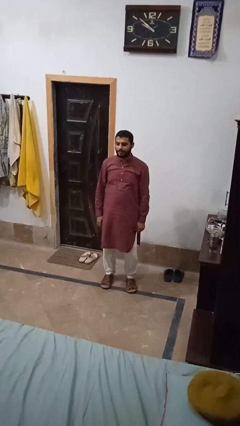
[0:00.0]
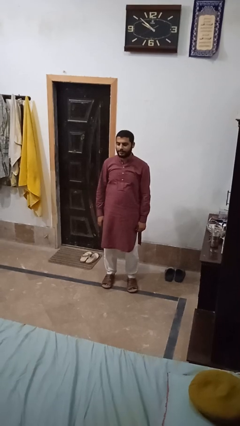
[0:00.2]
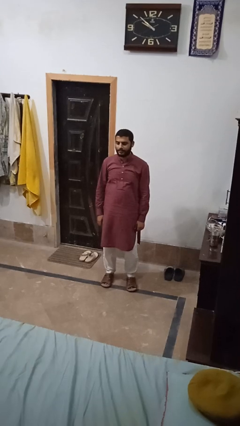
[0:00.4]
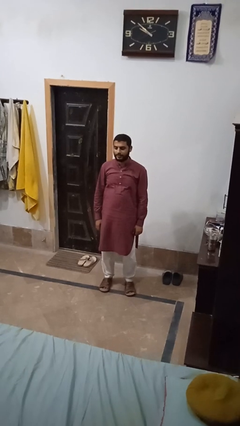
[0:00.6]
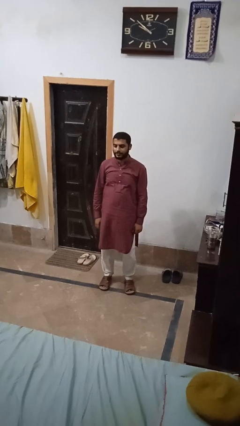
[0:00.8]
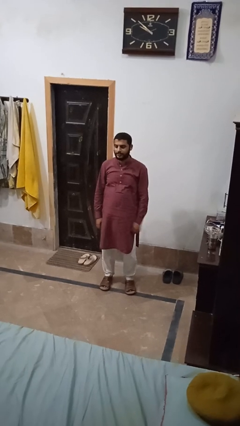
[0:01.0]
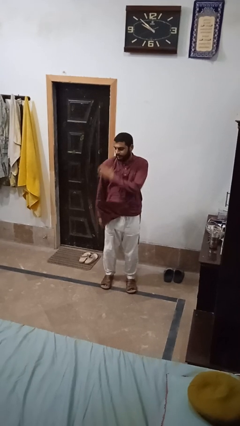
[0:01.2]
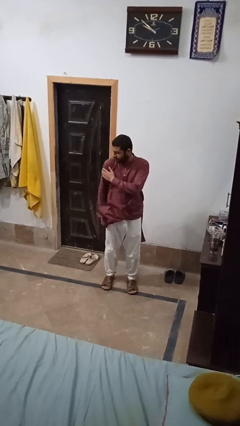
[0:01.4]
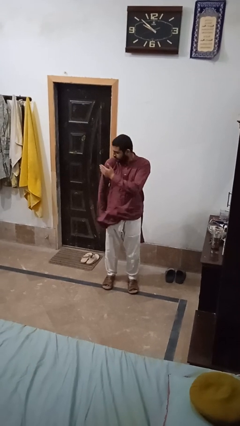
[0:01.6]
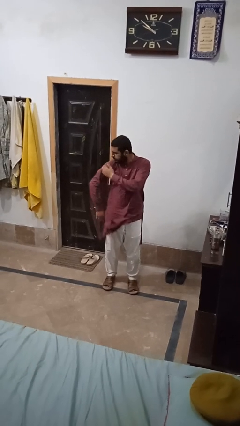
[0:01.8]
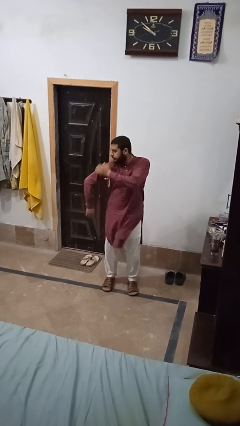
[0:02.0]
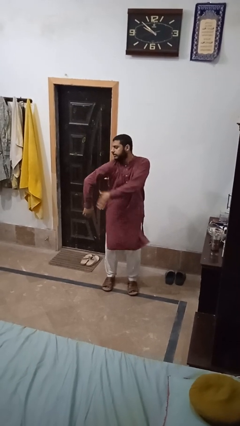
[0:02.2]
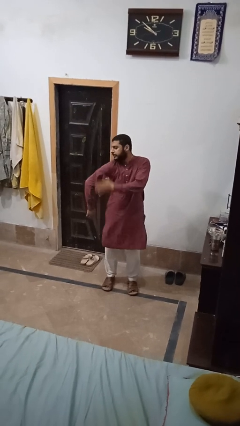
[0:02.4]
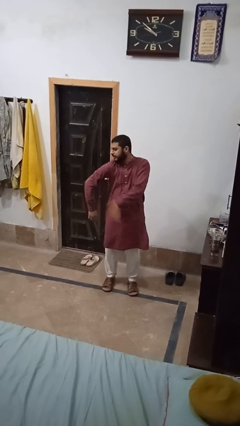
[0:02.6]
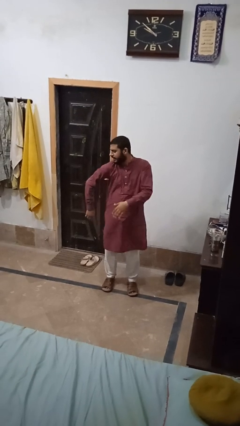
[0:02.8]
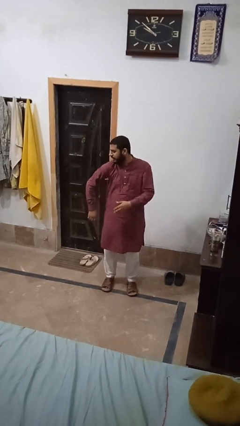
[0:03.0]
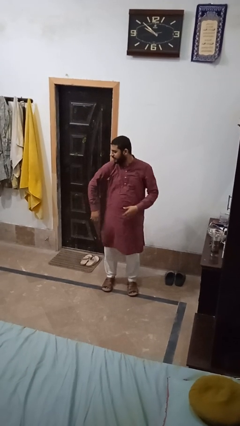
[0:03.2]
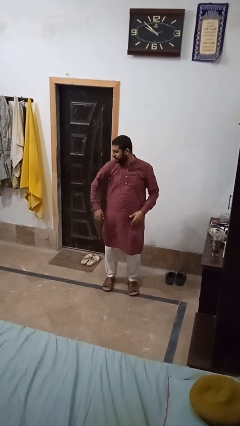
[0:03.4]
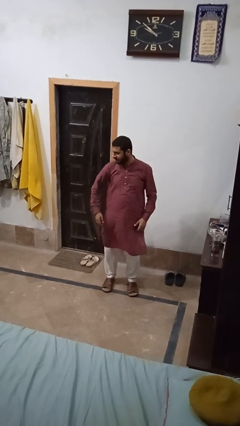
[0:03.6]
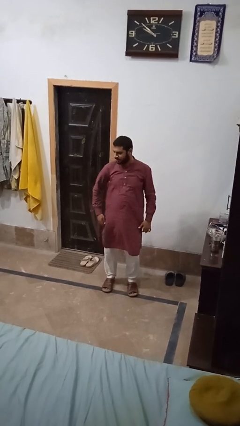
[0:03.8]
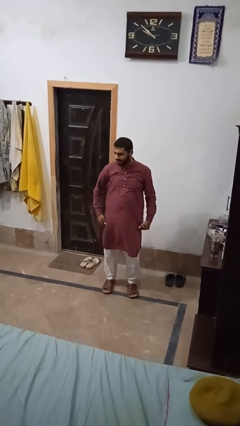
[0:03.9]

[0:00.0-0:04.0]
person swats bug

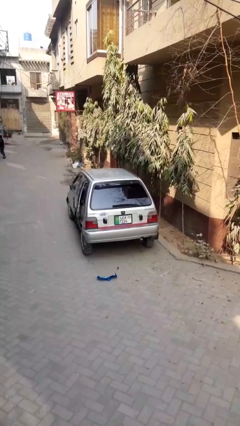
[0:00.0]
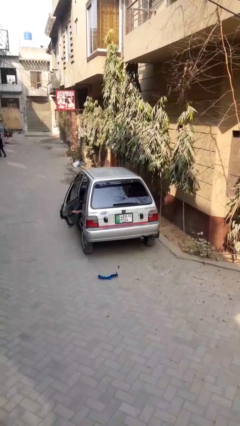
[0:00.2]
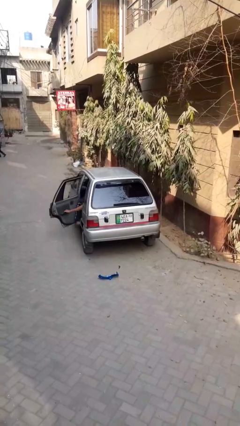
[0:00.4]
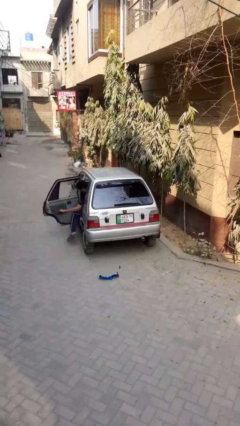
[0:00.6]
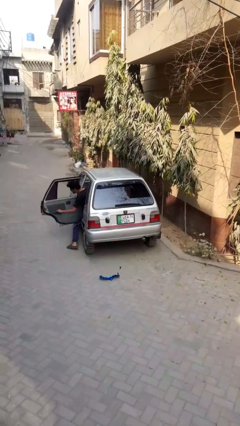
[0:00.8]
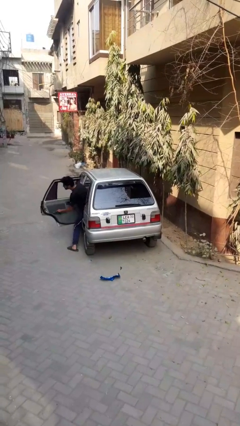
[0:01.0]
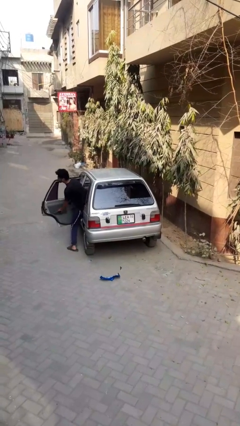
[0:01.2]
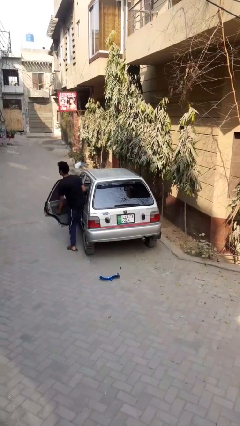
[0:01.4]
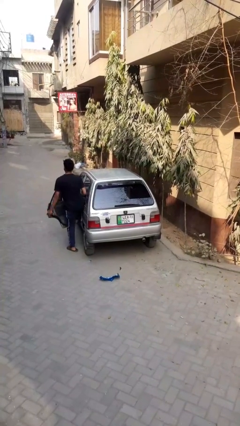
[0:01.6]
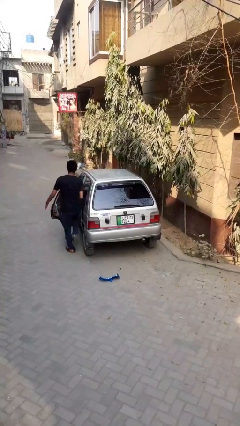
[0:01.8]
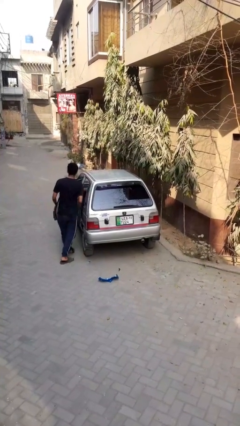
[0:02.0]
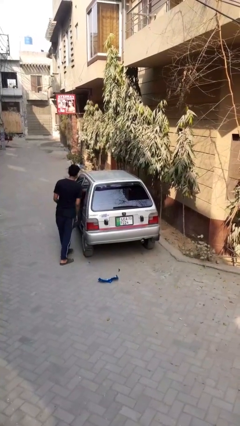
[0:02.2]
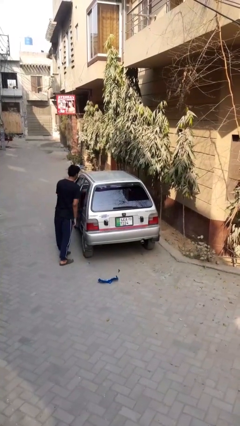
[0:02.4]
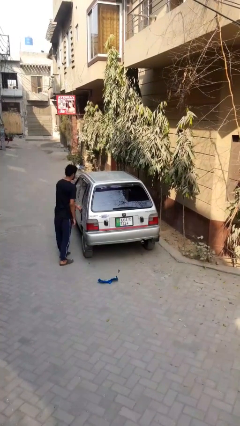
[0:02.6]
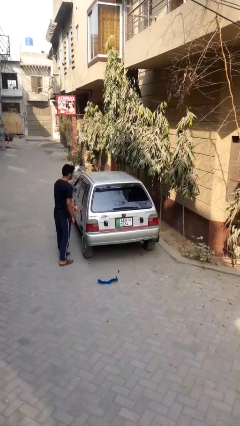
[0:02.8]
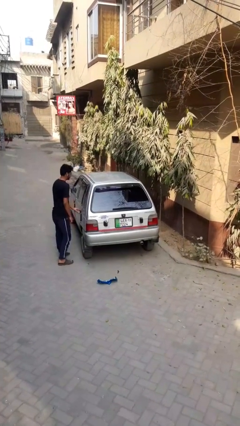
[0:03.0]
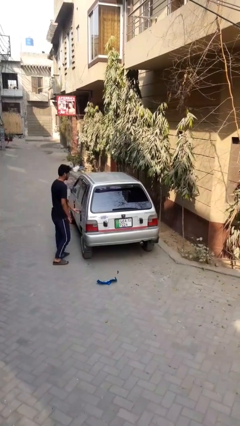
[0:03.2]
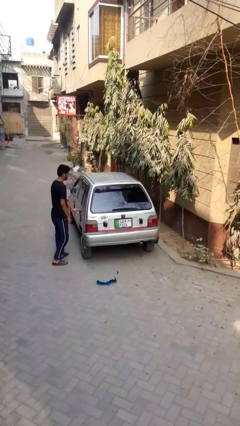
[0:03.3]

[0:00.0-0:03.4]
car drops off person

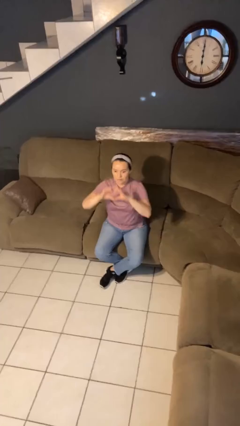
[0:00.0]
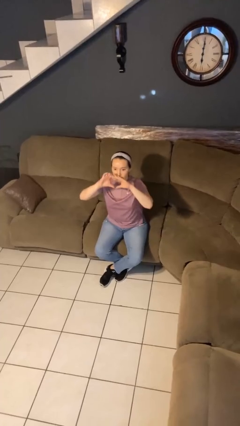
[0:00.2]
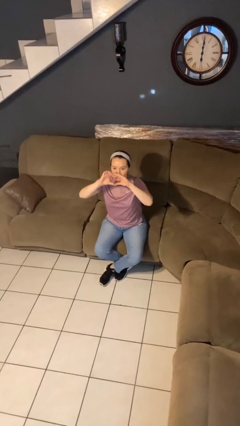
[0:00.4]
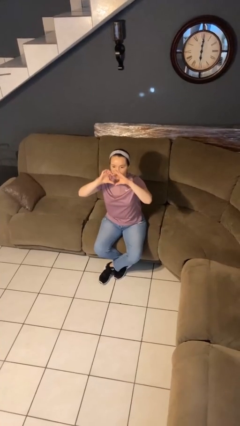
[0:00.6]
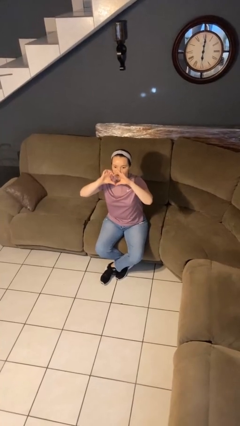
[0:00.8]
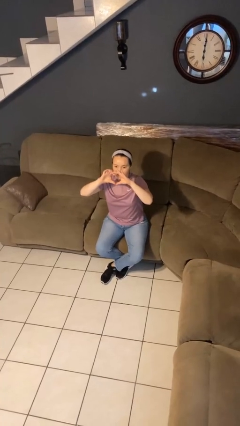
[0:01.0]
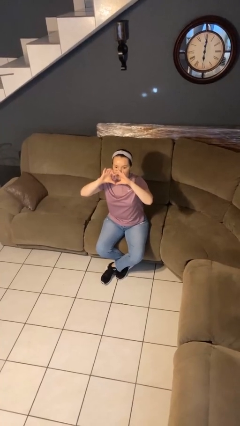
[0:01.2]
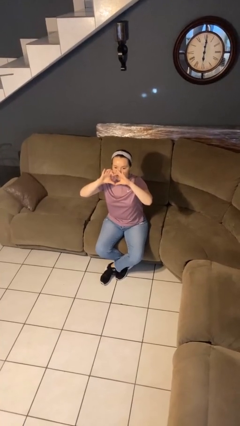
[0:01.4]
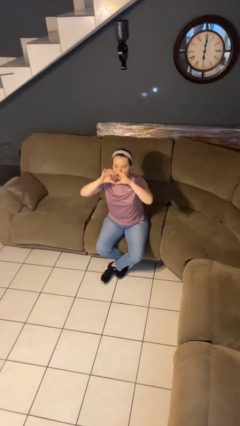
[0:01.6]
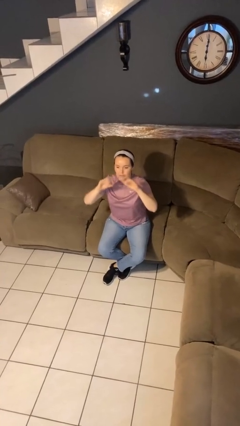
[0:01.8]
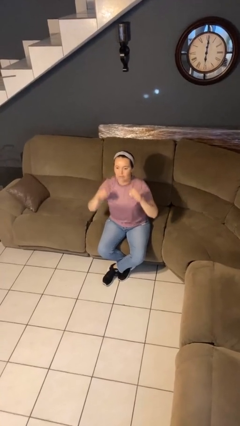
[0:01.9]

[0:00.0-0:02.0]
person gestures heart

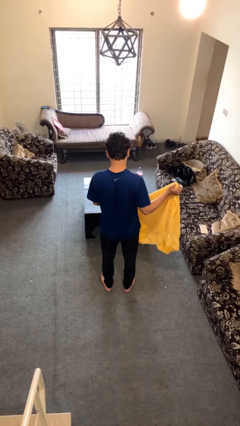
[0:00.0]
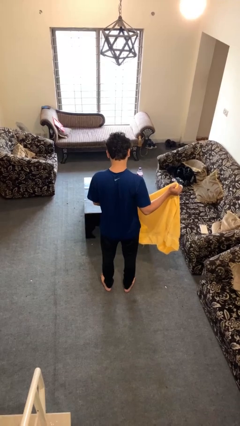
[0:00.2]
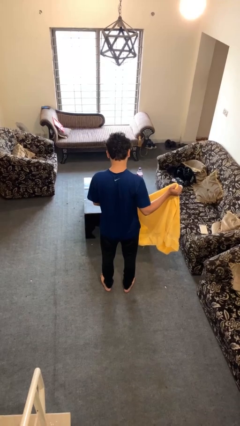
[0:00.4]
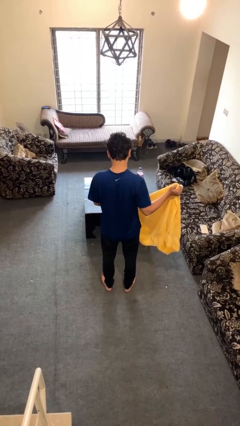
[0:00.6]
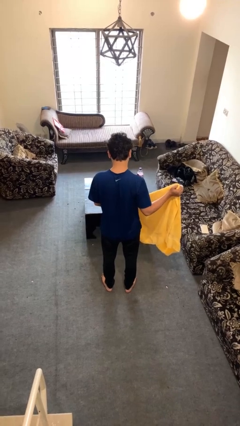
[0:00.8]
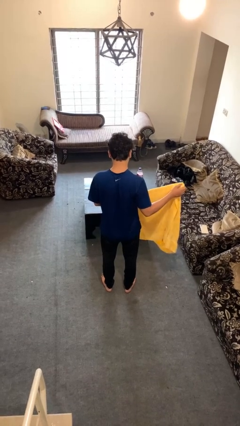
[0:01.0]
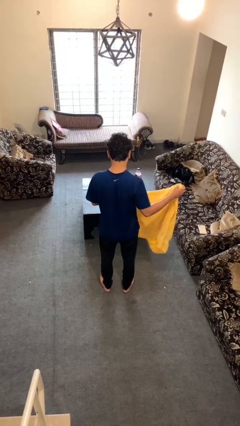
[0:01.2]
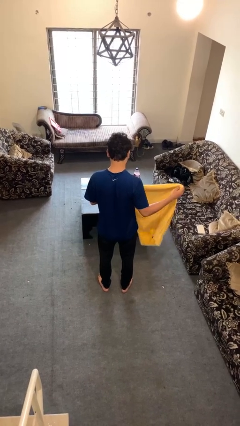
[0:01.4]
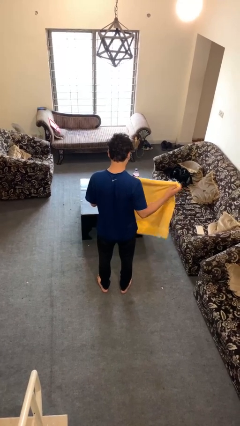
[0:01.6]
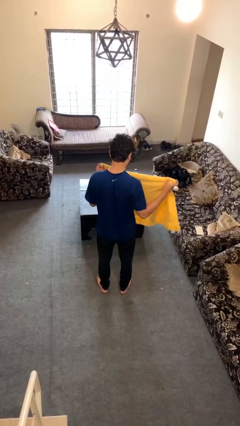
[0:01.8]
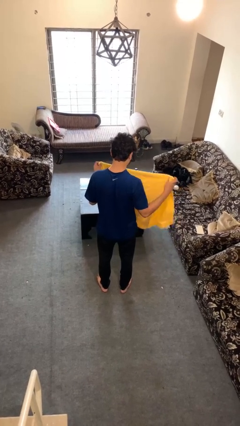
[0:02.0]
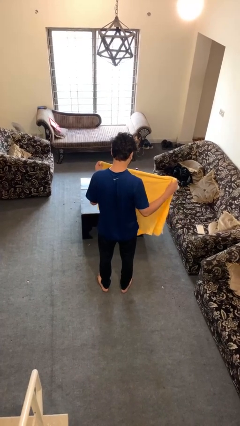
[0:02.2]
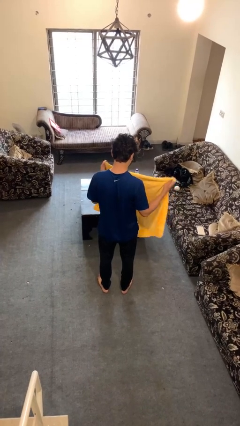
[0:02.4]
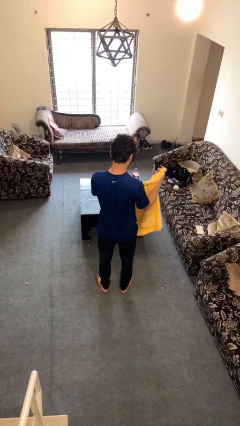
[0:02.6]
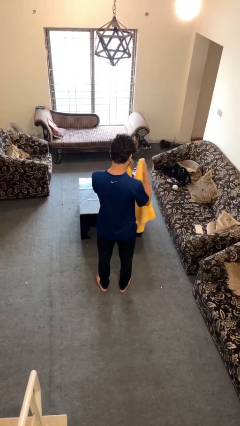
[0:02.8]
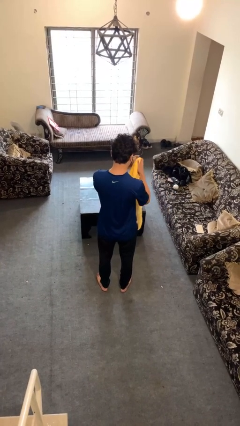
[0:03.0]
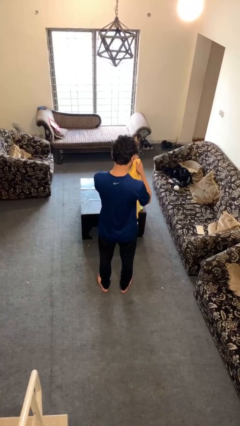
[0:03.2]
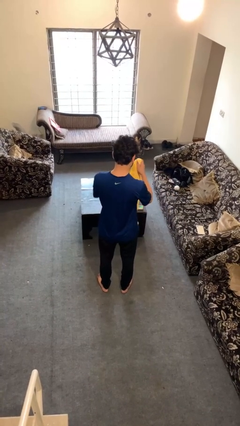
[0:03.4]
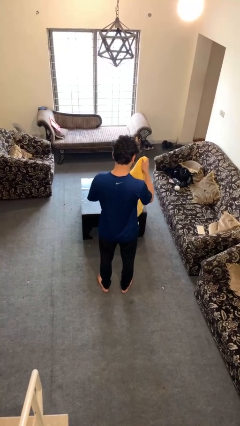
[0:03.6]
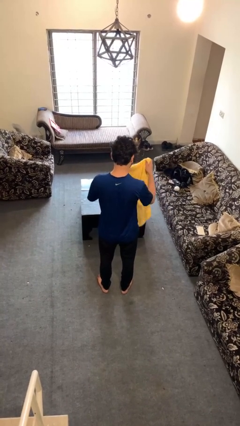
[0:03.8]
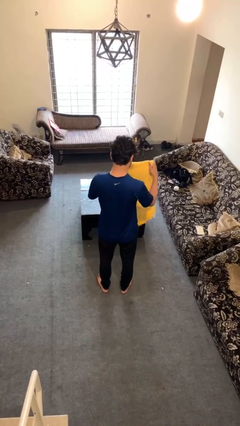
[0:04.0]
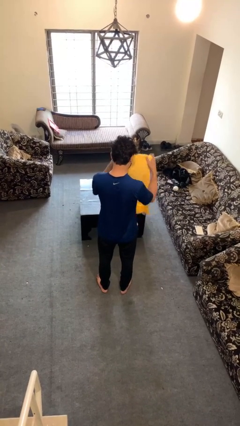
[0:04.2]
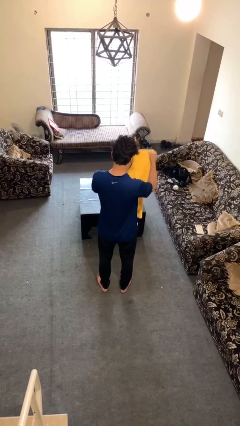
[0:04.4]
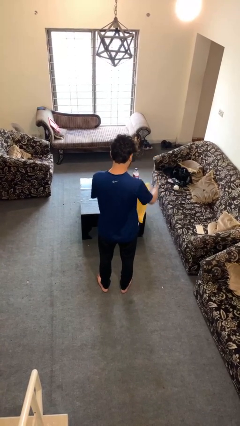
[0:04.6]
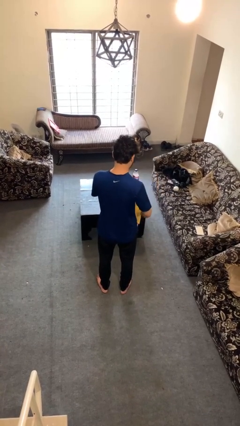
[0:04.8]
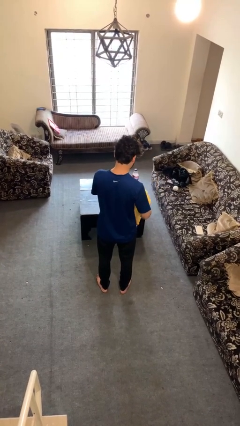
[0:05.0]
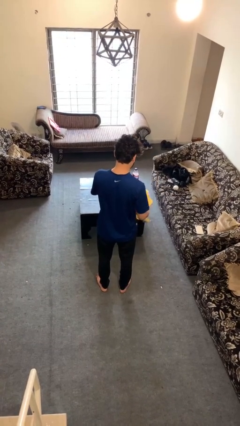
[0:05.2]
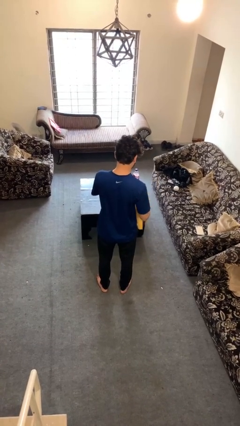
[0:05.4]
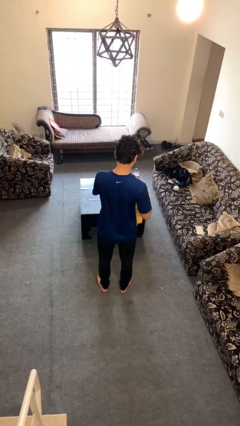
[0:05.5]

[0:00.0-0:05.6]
person folds towel

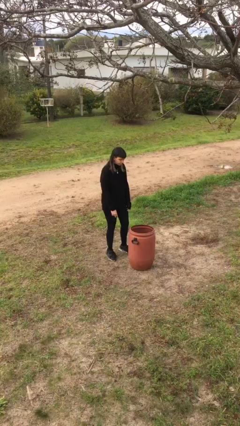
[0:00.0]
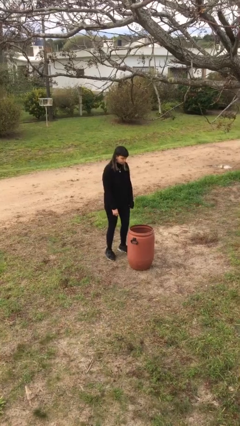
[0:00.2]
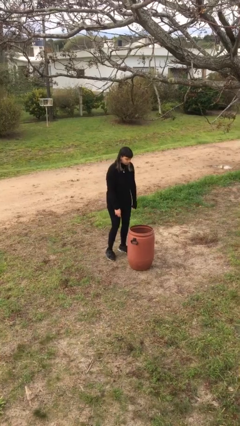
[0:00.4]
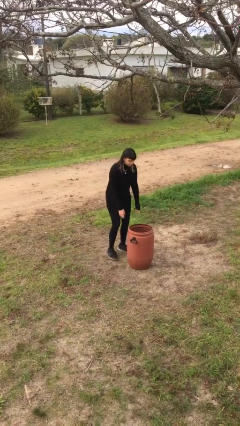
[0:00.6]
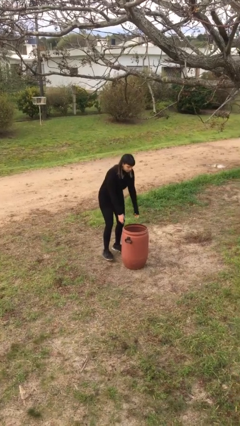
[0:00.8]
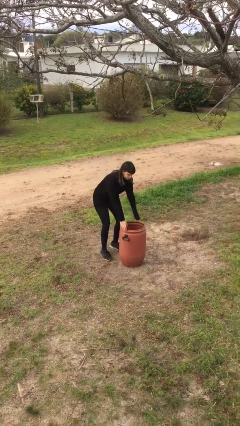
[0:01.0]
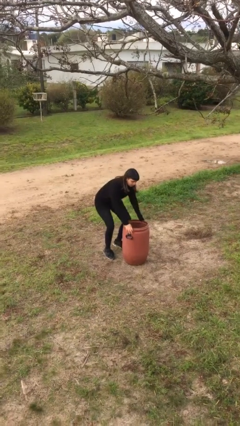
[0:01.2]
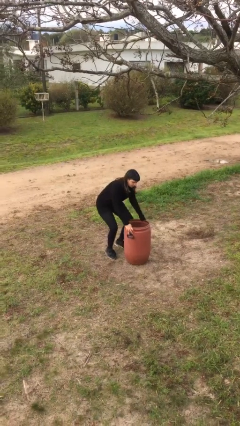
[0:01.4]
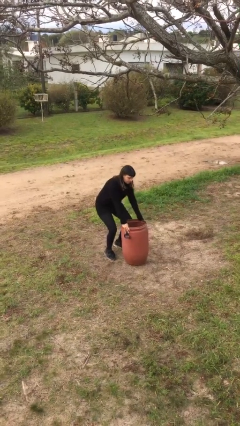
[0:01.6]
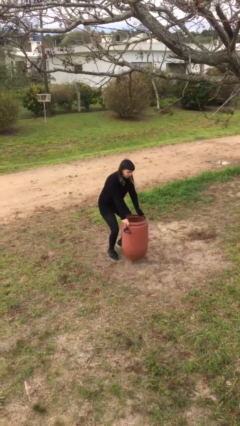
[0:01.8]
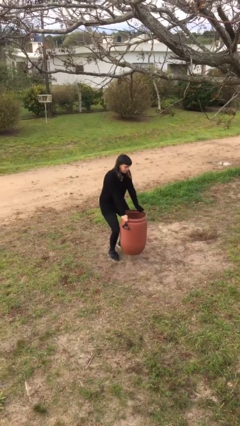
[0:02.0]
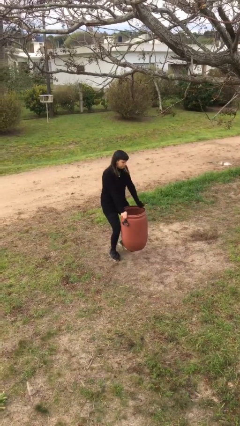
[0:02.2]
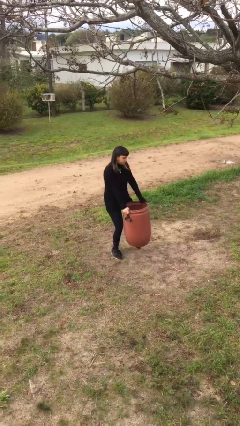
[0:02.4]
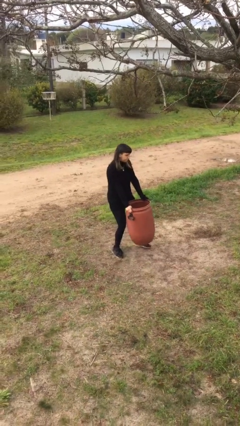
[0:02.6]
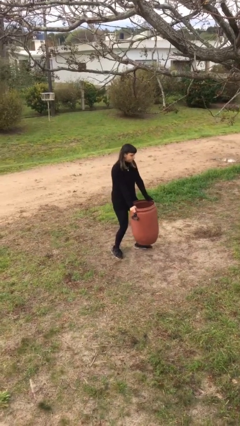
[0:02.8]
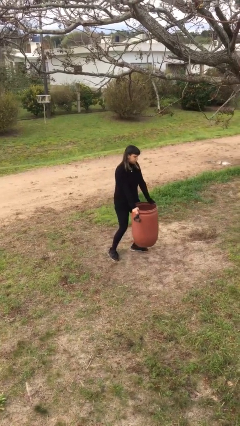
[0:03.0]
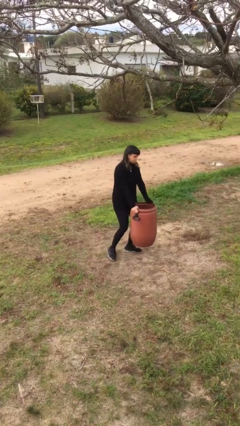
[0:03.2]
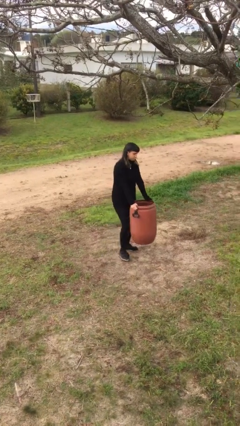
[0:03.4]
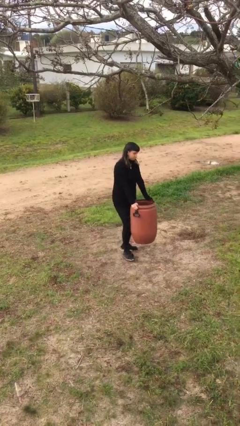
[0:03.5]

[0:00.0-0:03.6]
person picks up object from floor
